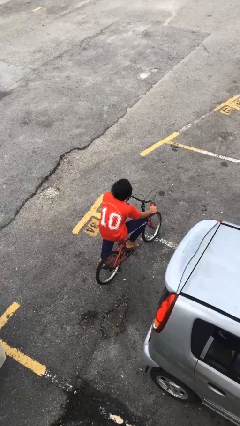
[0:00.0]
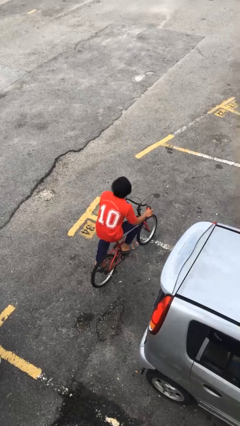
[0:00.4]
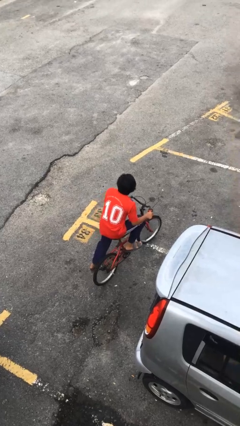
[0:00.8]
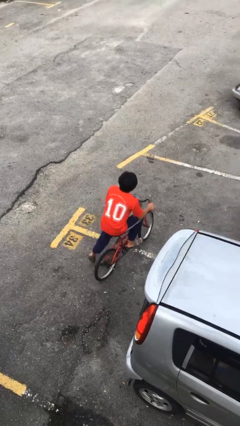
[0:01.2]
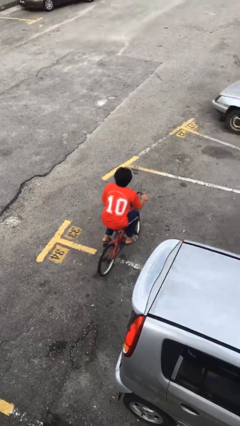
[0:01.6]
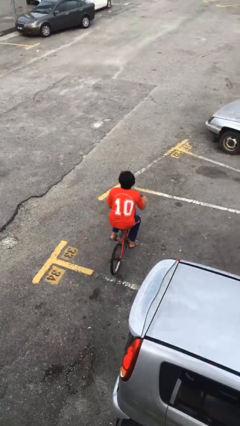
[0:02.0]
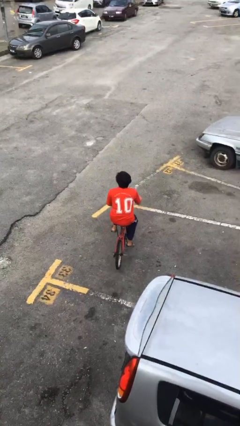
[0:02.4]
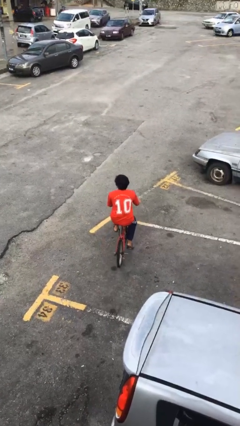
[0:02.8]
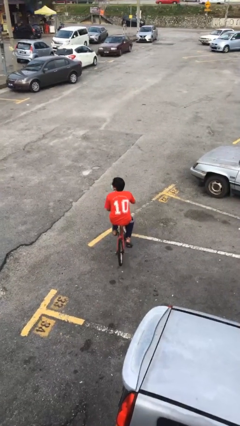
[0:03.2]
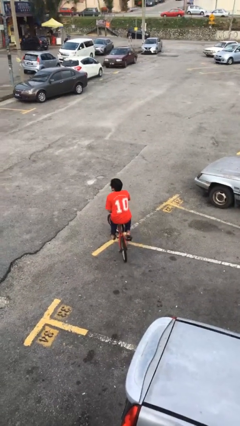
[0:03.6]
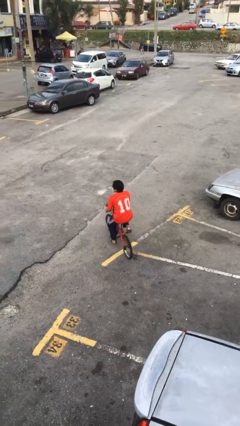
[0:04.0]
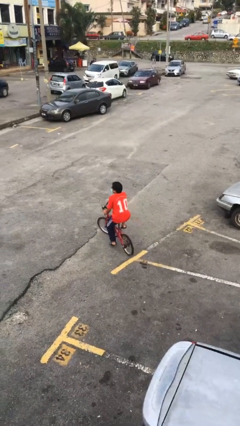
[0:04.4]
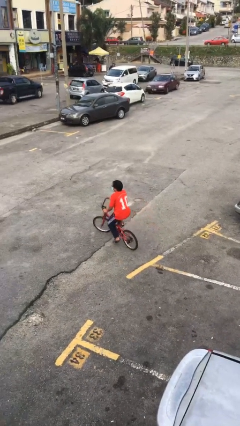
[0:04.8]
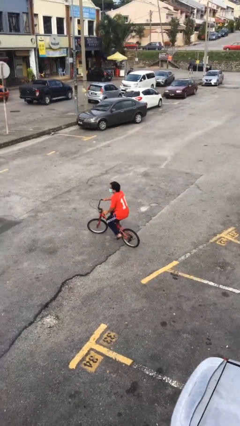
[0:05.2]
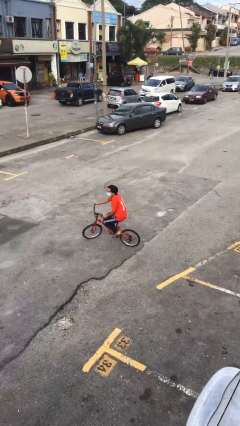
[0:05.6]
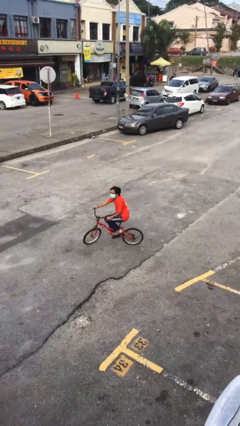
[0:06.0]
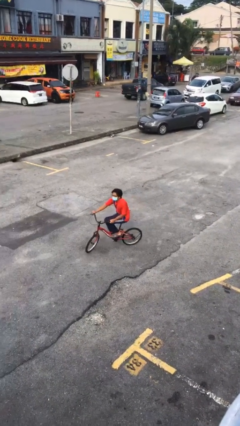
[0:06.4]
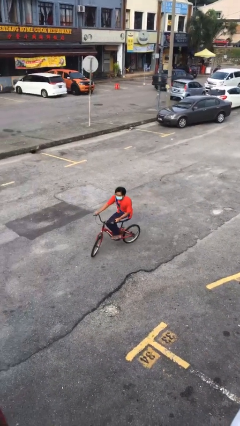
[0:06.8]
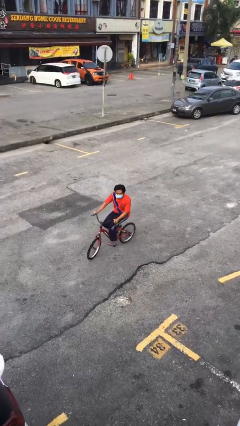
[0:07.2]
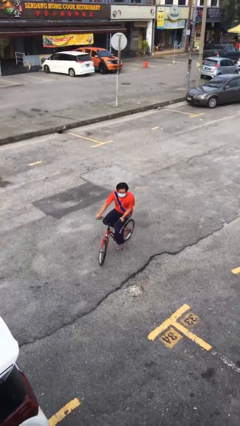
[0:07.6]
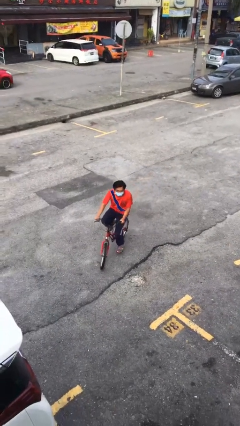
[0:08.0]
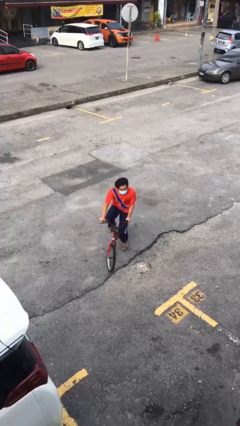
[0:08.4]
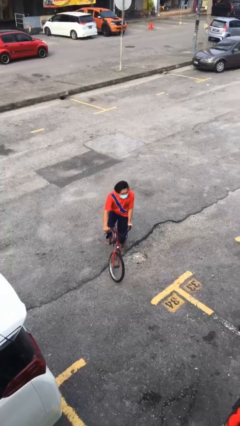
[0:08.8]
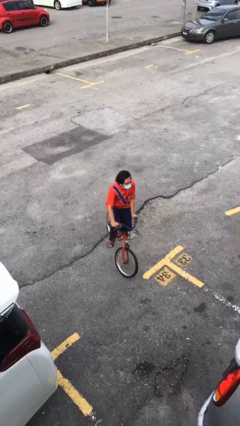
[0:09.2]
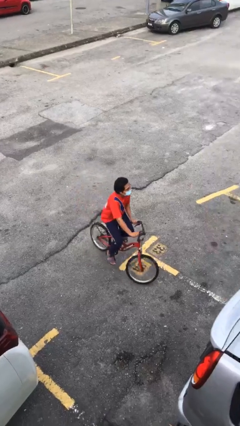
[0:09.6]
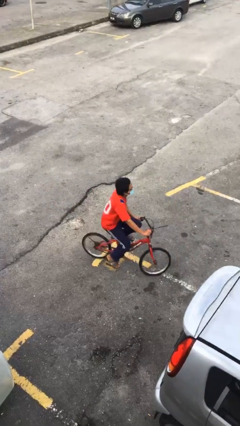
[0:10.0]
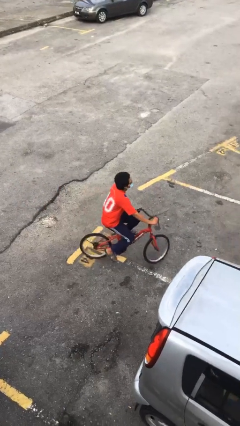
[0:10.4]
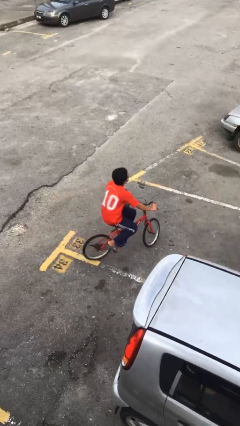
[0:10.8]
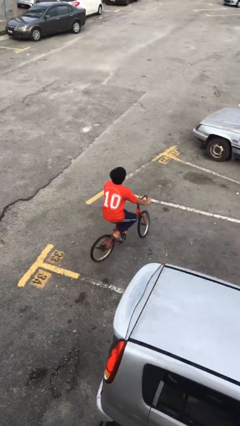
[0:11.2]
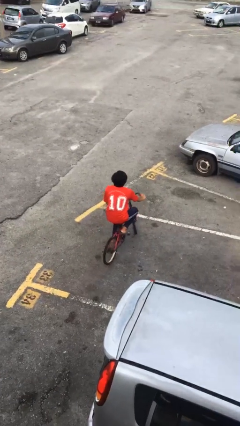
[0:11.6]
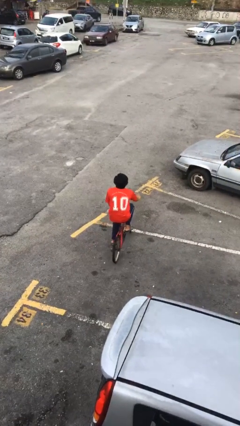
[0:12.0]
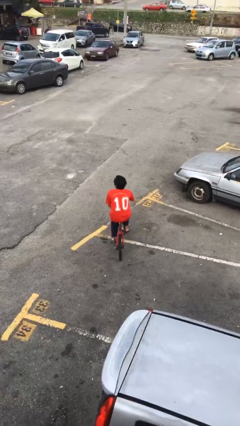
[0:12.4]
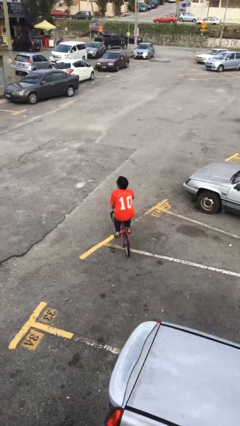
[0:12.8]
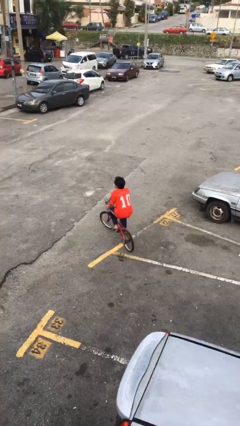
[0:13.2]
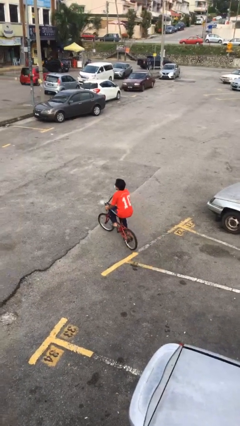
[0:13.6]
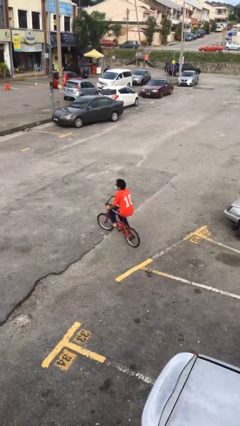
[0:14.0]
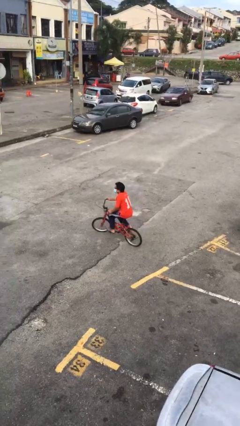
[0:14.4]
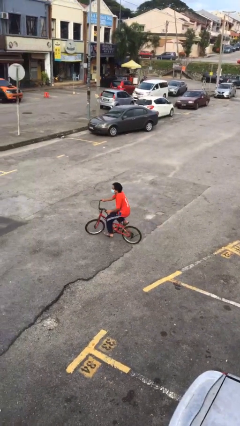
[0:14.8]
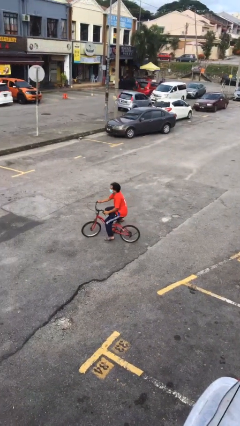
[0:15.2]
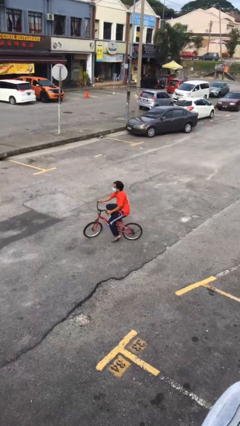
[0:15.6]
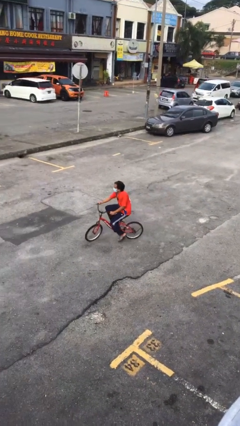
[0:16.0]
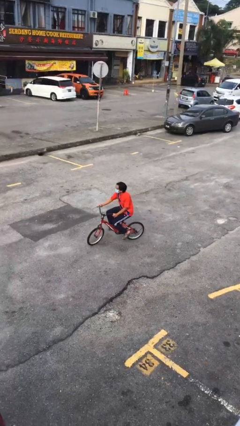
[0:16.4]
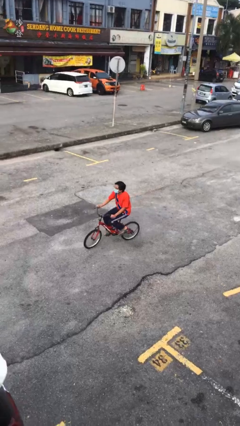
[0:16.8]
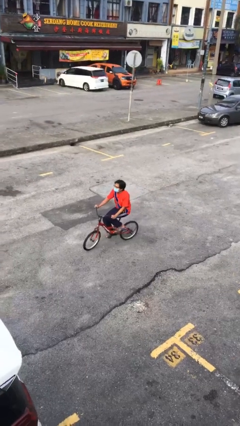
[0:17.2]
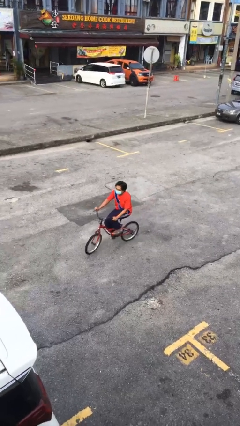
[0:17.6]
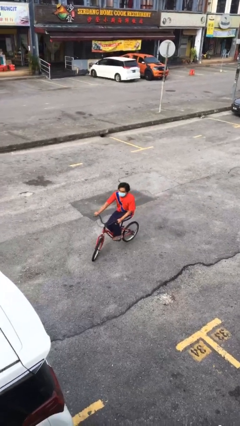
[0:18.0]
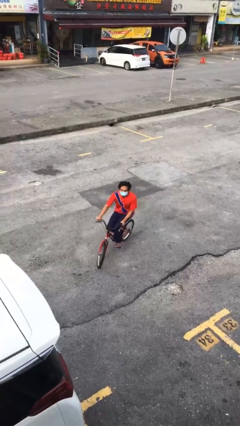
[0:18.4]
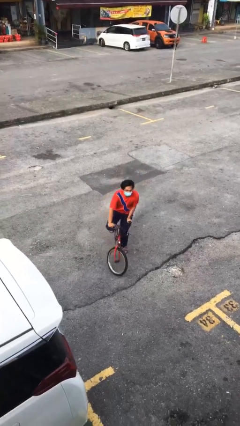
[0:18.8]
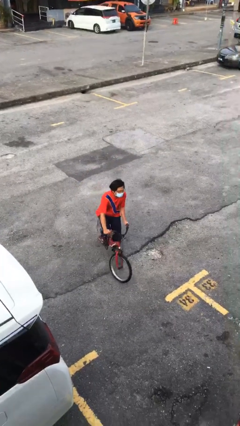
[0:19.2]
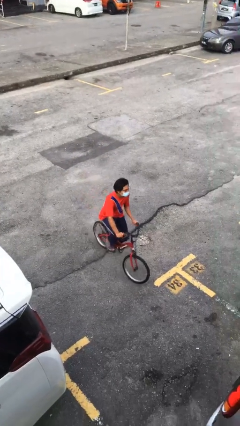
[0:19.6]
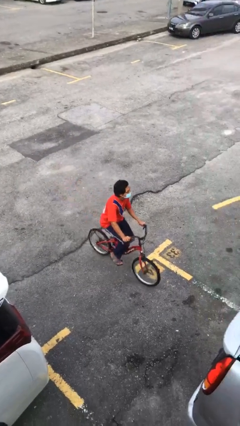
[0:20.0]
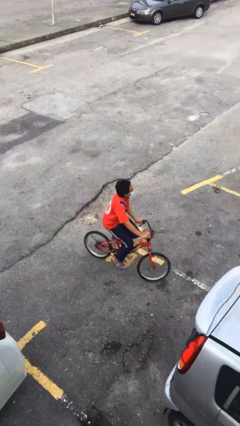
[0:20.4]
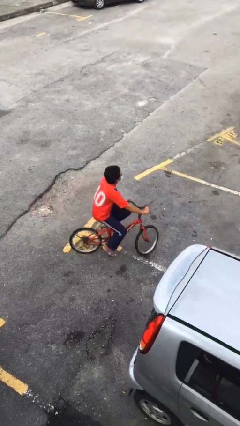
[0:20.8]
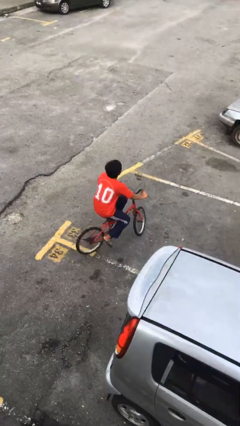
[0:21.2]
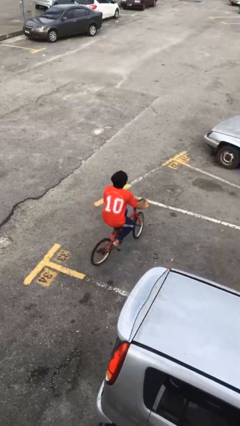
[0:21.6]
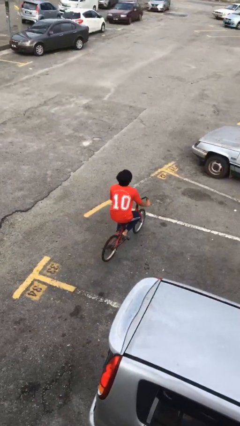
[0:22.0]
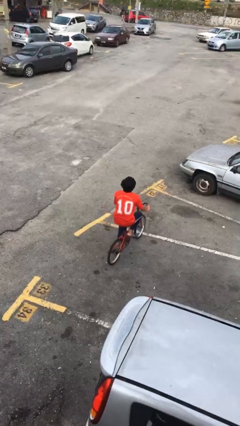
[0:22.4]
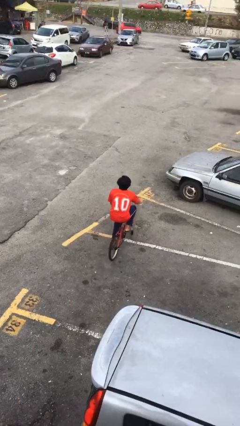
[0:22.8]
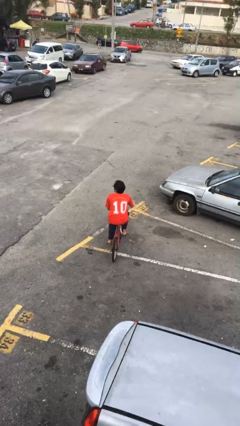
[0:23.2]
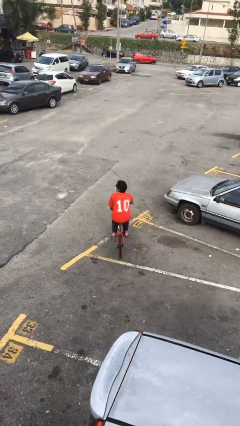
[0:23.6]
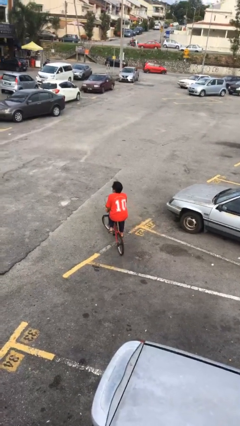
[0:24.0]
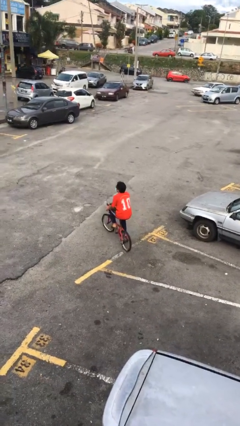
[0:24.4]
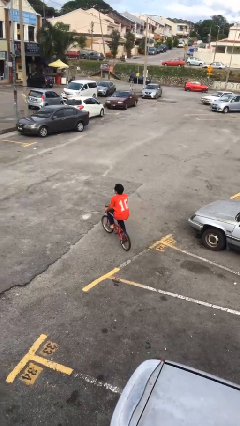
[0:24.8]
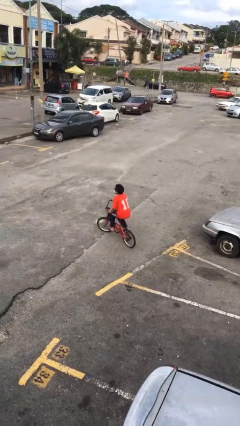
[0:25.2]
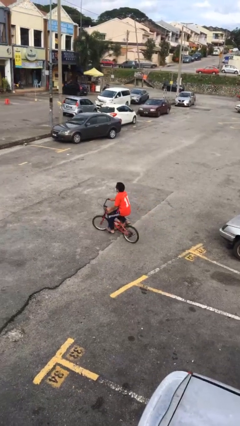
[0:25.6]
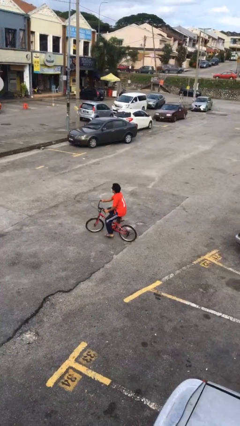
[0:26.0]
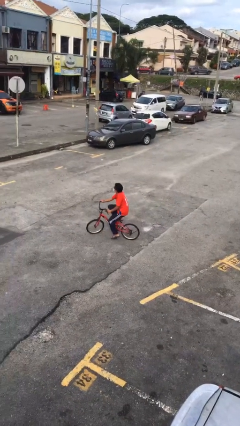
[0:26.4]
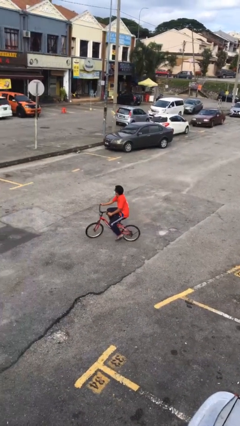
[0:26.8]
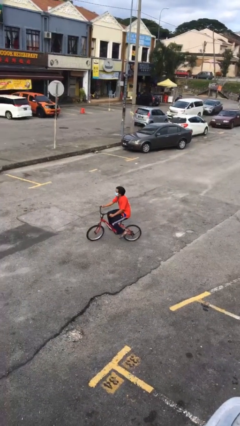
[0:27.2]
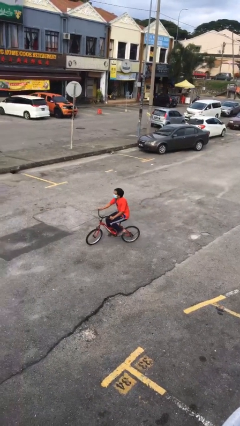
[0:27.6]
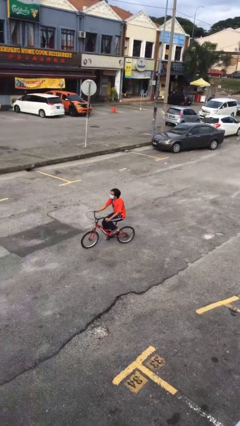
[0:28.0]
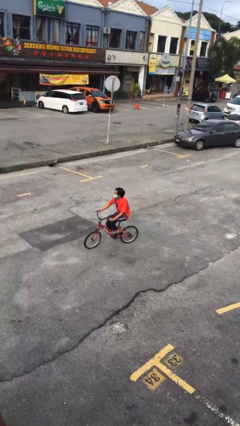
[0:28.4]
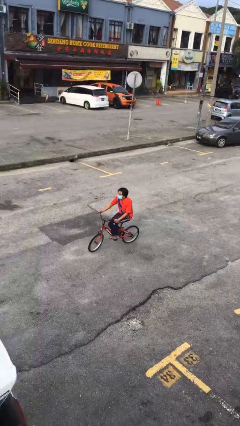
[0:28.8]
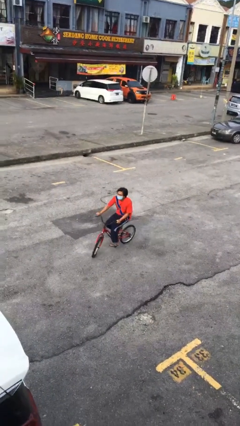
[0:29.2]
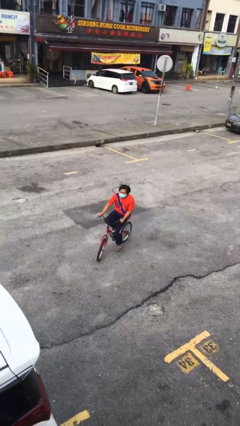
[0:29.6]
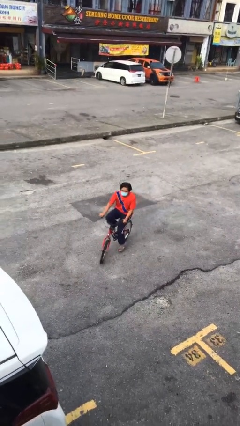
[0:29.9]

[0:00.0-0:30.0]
person rides bicycle

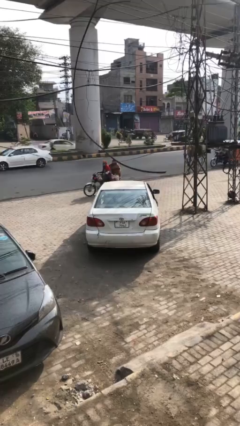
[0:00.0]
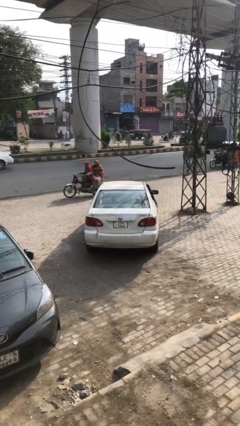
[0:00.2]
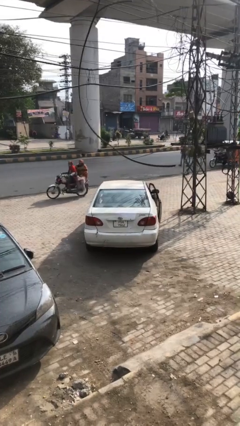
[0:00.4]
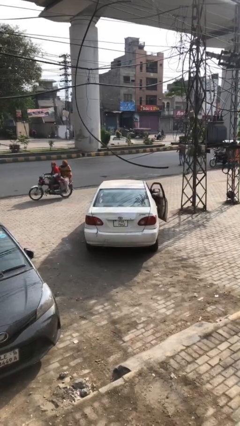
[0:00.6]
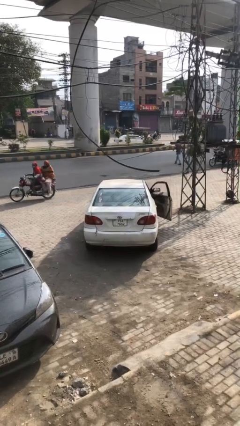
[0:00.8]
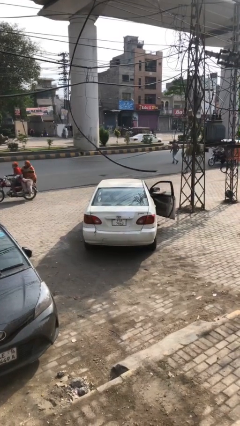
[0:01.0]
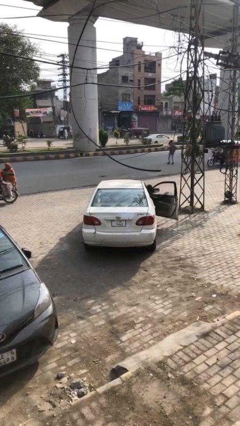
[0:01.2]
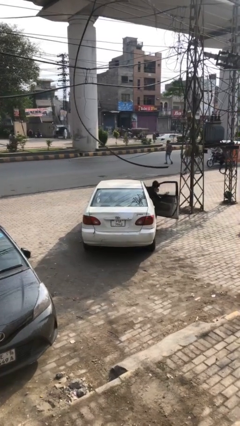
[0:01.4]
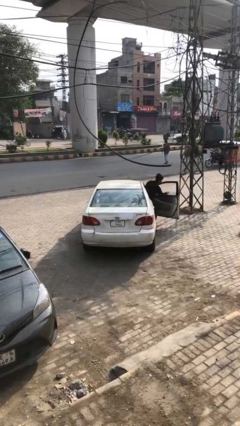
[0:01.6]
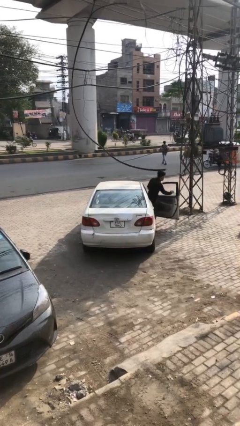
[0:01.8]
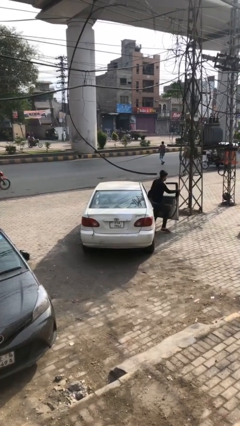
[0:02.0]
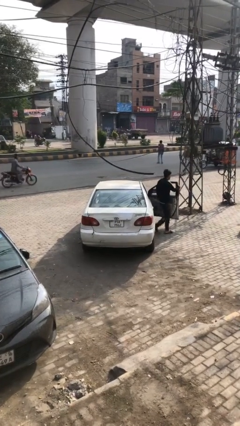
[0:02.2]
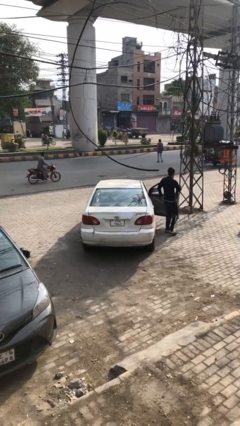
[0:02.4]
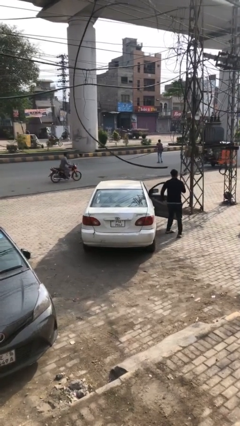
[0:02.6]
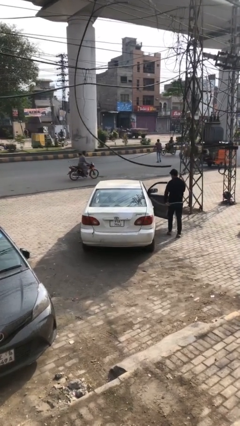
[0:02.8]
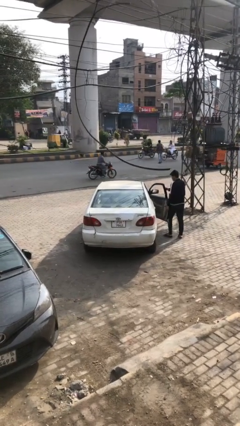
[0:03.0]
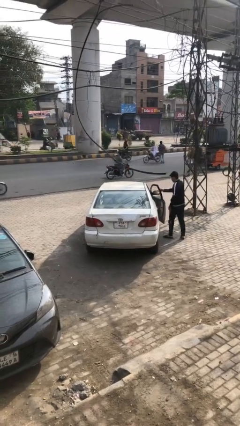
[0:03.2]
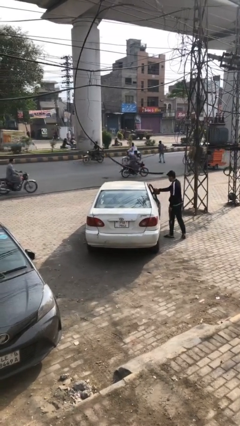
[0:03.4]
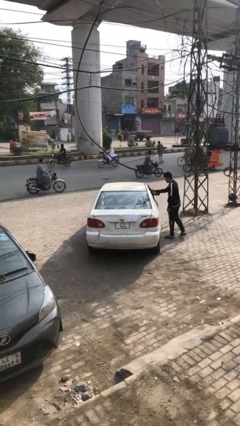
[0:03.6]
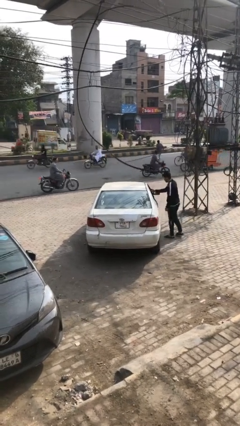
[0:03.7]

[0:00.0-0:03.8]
car drops off person
